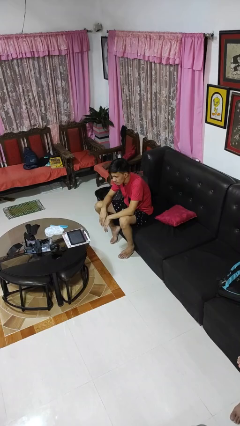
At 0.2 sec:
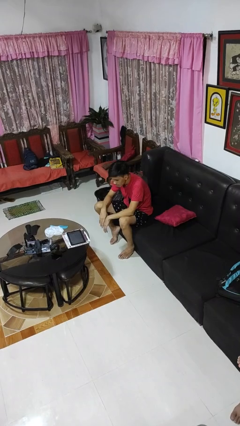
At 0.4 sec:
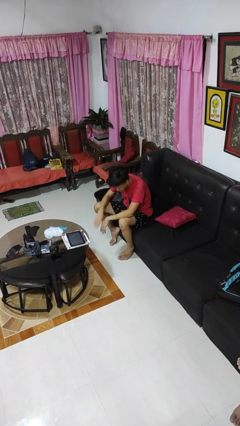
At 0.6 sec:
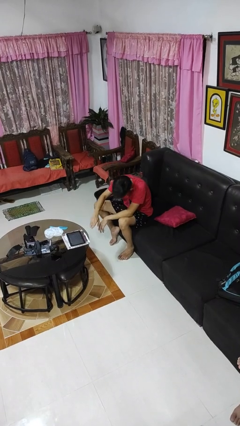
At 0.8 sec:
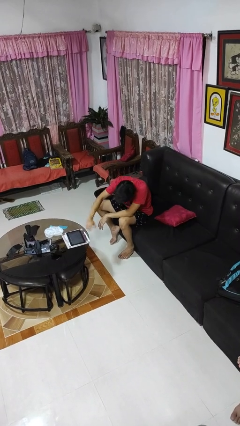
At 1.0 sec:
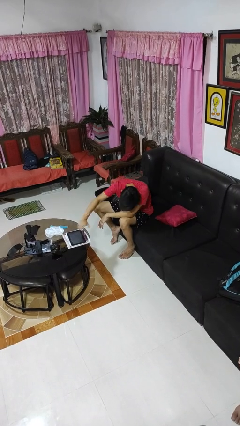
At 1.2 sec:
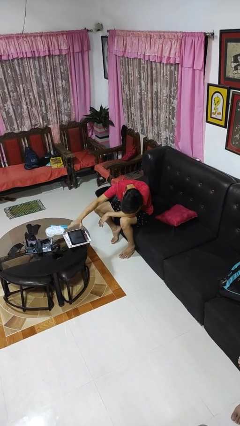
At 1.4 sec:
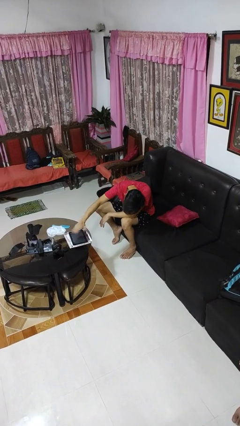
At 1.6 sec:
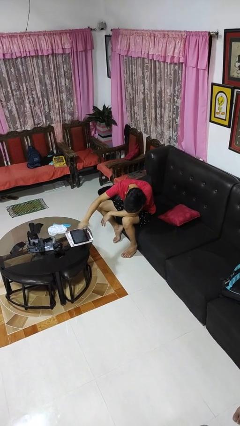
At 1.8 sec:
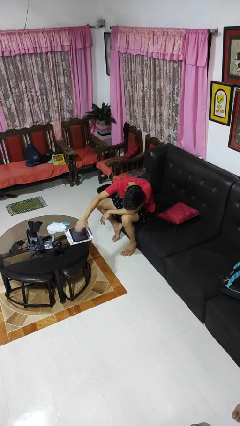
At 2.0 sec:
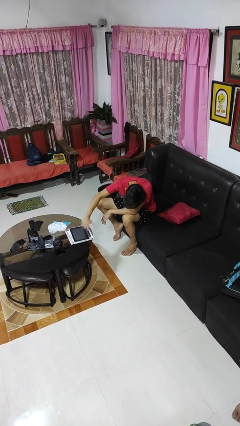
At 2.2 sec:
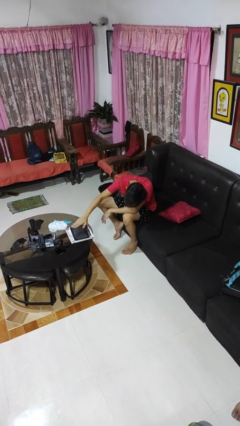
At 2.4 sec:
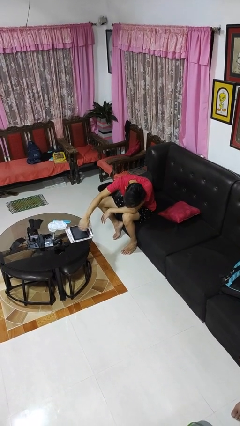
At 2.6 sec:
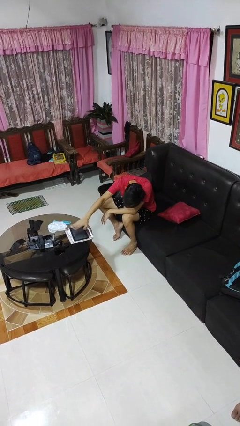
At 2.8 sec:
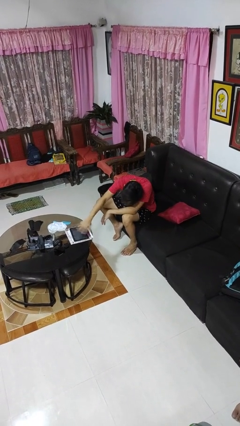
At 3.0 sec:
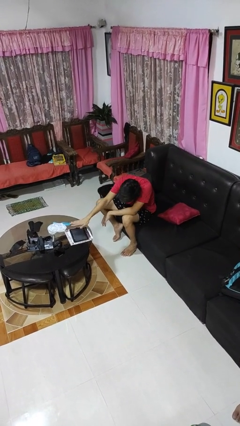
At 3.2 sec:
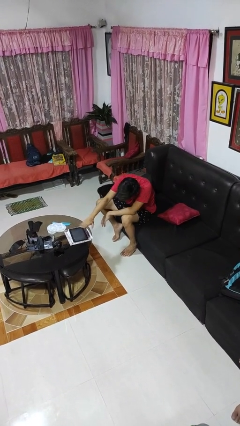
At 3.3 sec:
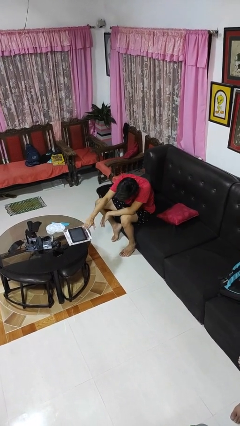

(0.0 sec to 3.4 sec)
person waves hand over object

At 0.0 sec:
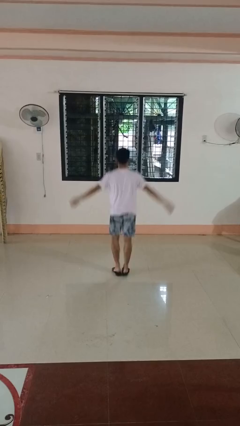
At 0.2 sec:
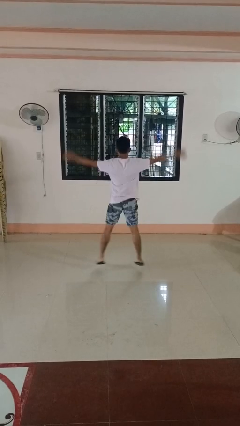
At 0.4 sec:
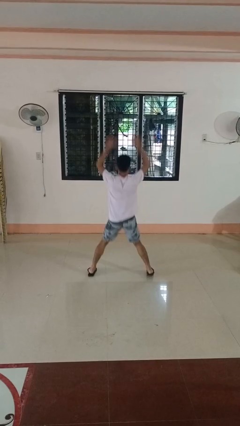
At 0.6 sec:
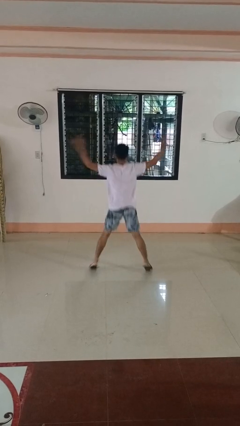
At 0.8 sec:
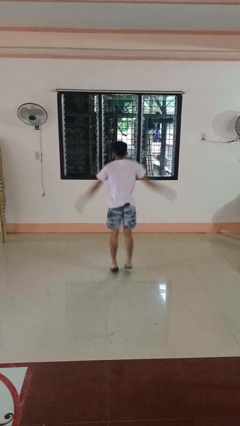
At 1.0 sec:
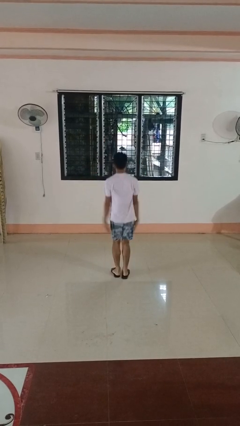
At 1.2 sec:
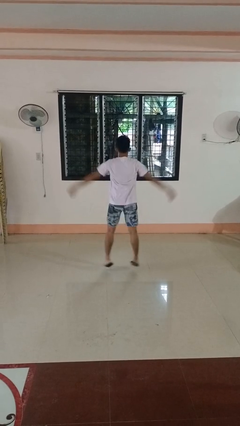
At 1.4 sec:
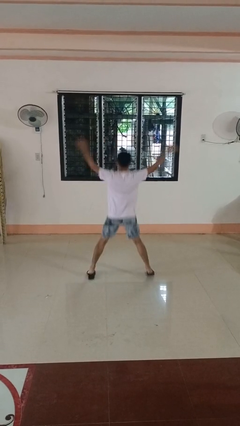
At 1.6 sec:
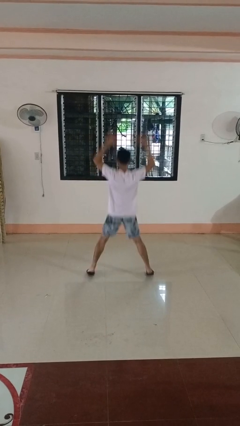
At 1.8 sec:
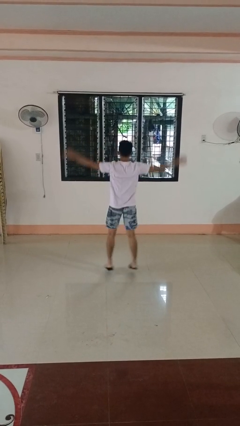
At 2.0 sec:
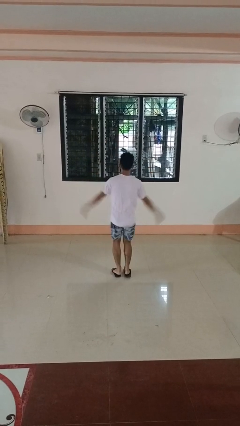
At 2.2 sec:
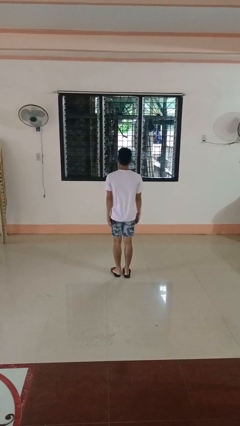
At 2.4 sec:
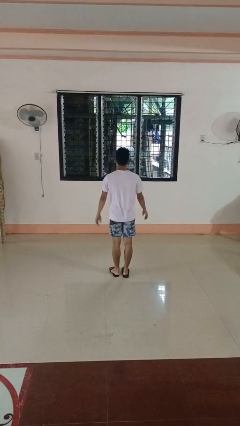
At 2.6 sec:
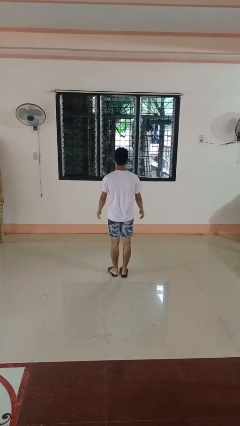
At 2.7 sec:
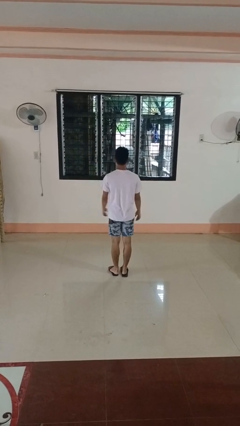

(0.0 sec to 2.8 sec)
person exercises with jumping jacks

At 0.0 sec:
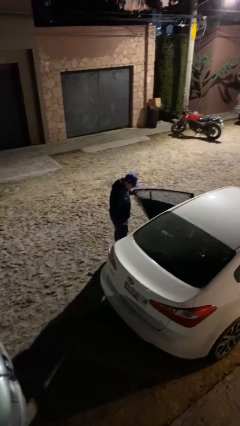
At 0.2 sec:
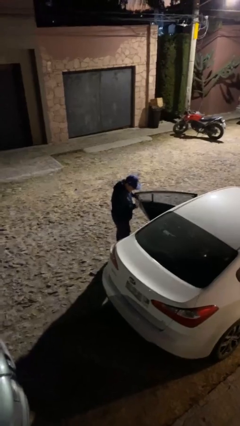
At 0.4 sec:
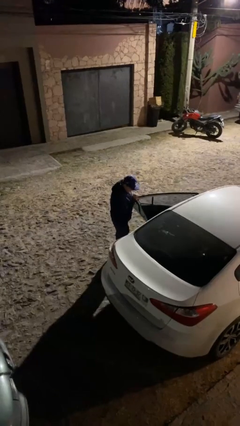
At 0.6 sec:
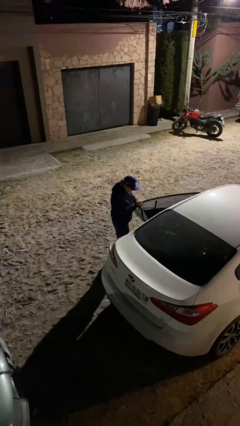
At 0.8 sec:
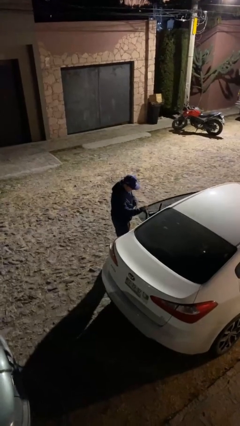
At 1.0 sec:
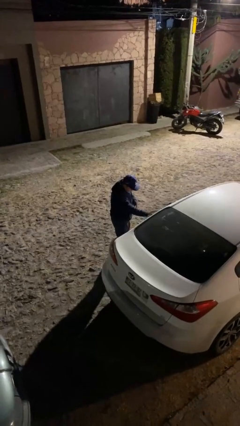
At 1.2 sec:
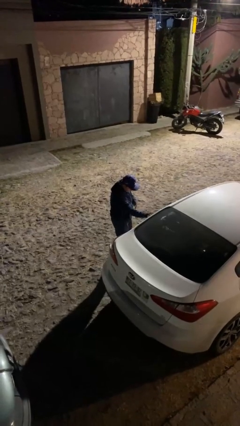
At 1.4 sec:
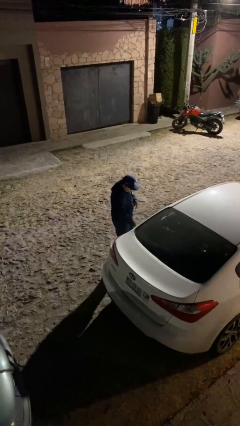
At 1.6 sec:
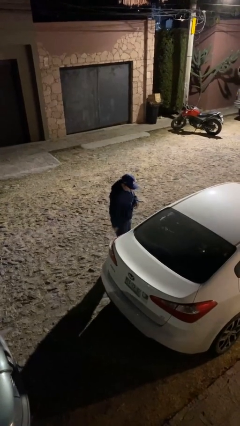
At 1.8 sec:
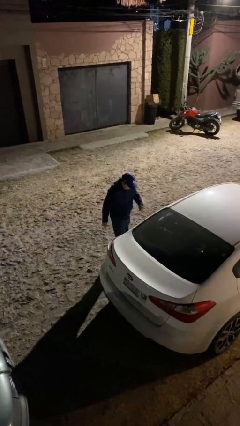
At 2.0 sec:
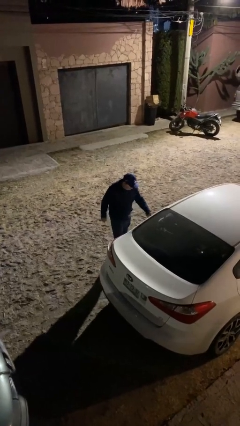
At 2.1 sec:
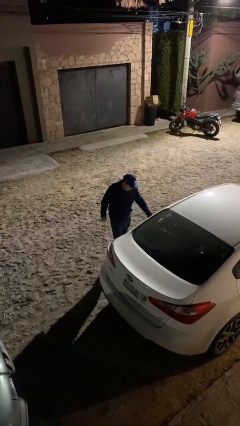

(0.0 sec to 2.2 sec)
person closes car door

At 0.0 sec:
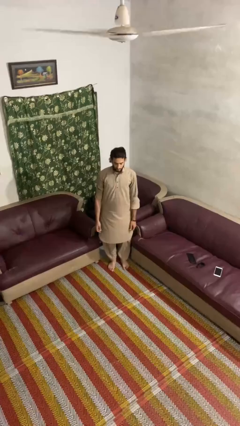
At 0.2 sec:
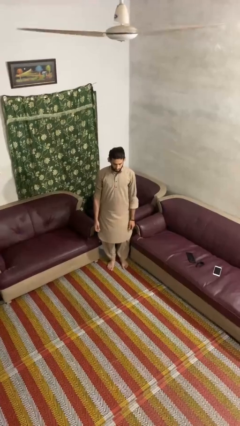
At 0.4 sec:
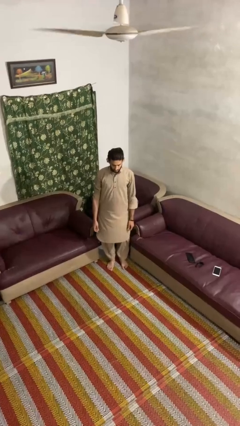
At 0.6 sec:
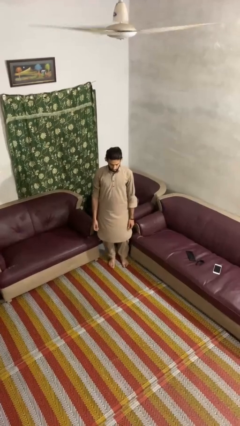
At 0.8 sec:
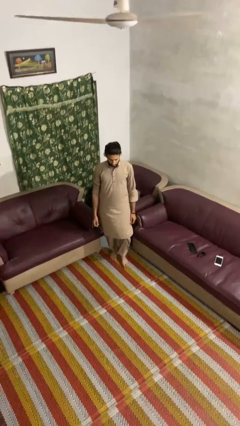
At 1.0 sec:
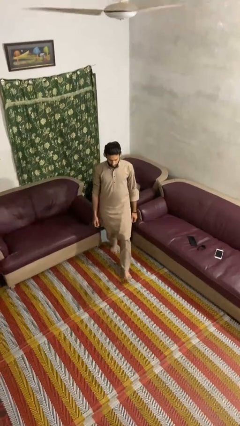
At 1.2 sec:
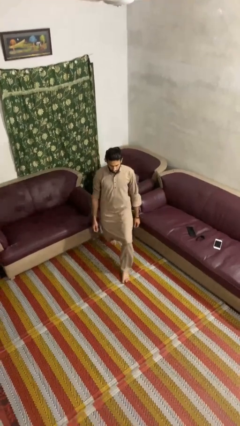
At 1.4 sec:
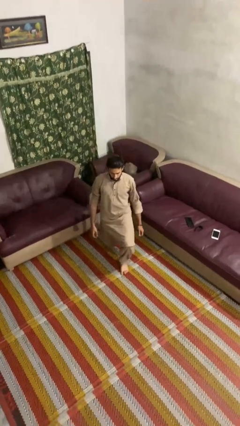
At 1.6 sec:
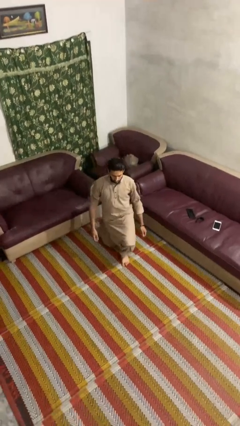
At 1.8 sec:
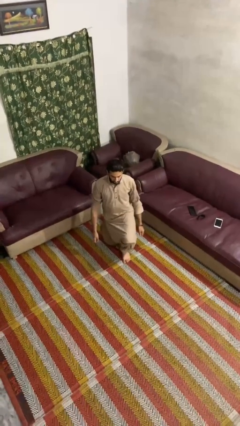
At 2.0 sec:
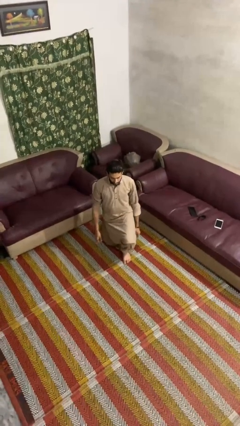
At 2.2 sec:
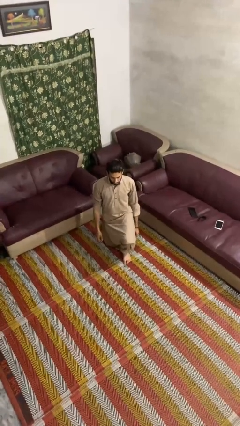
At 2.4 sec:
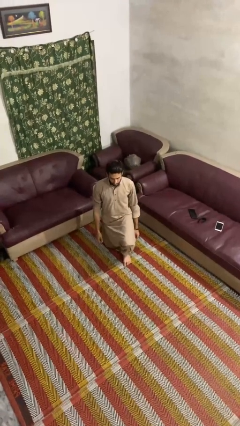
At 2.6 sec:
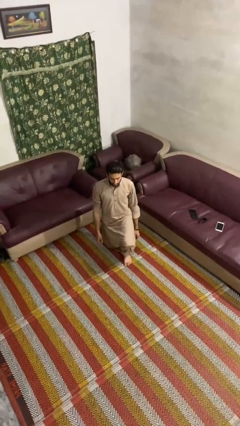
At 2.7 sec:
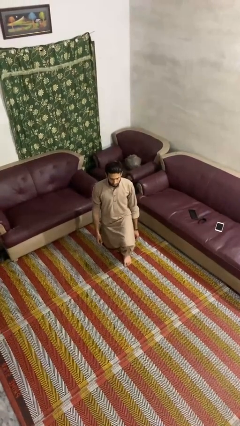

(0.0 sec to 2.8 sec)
person kneels

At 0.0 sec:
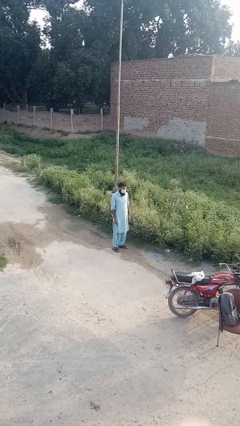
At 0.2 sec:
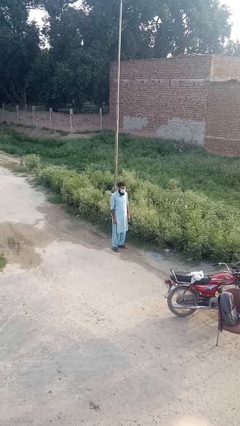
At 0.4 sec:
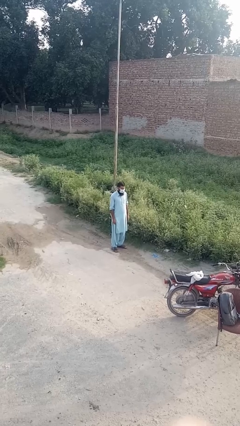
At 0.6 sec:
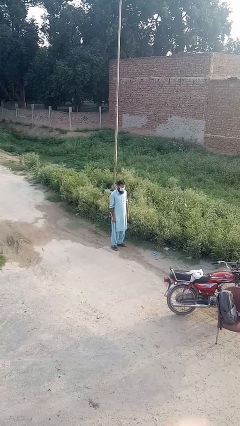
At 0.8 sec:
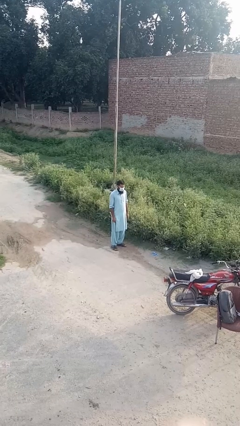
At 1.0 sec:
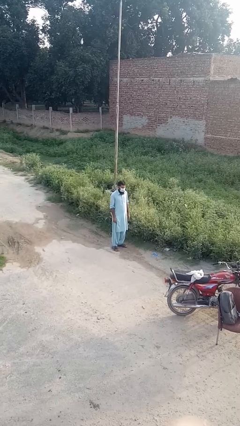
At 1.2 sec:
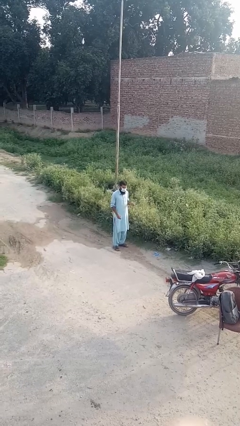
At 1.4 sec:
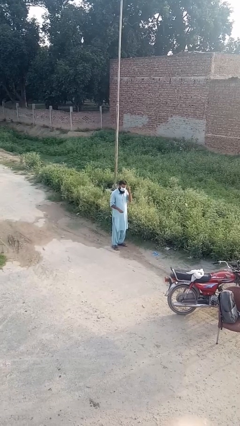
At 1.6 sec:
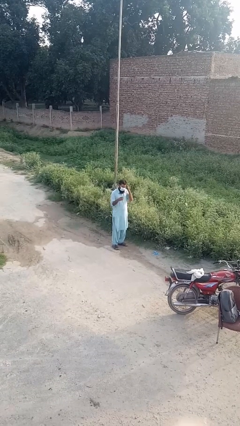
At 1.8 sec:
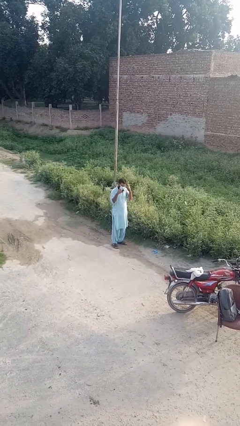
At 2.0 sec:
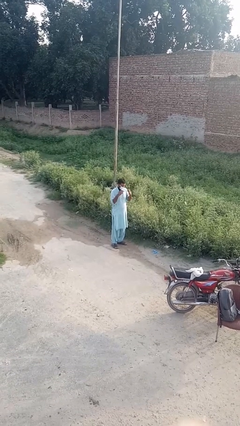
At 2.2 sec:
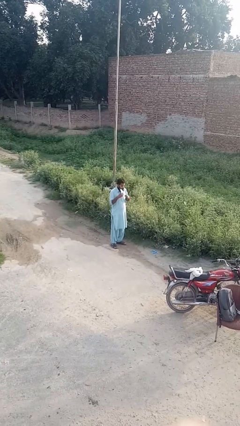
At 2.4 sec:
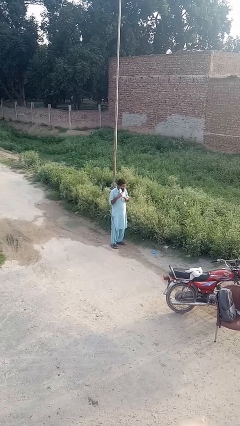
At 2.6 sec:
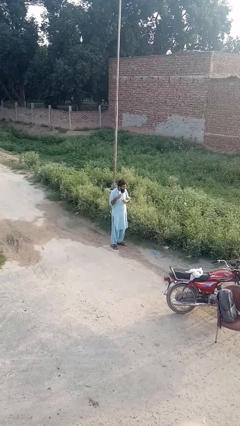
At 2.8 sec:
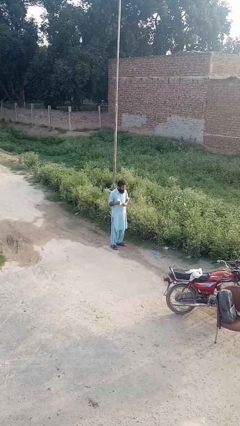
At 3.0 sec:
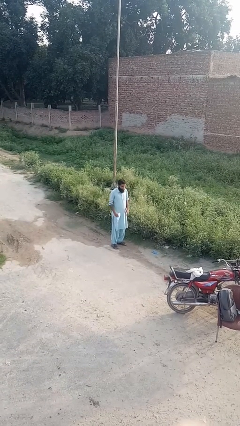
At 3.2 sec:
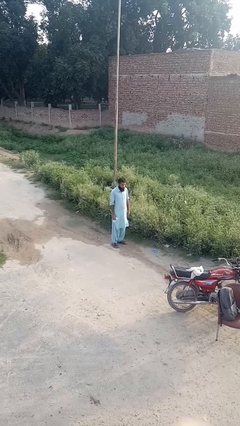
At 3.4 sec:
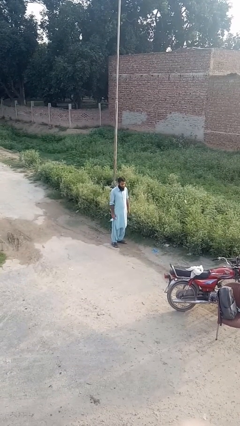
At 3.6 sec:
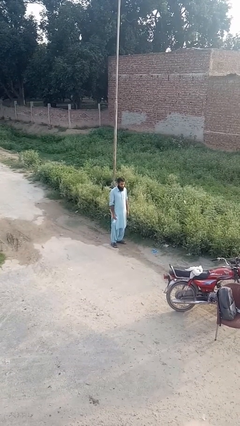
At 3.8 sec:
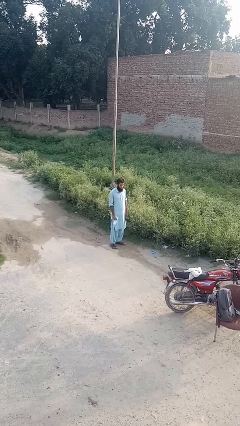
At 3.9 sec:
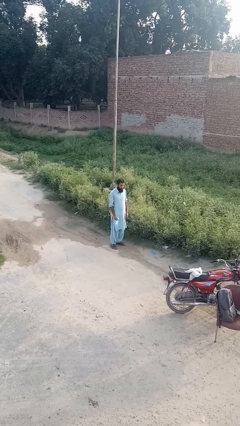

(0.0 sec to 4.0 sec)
person takes off facemask

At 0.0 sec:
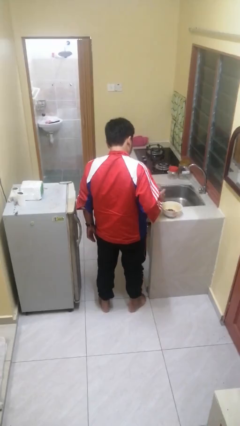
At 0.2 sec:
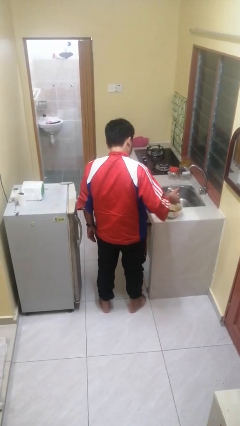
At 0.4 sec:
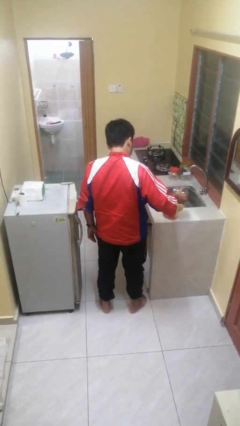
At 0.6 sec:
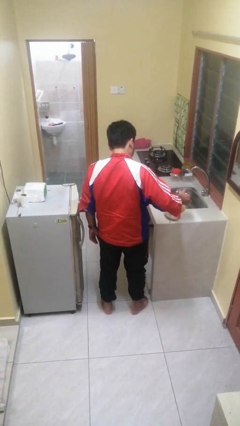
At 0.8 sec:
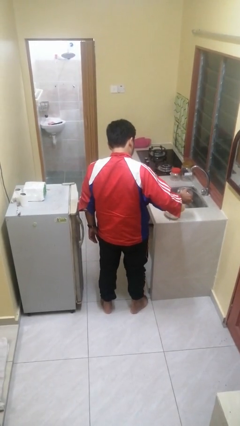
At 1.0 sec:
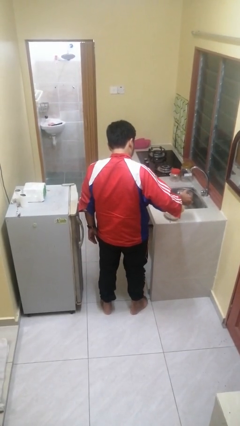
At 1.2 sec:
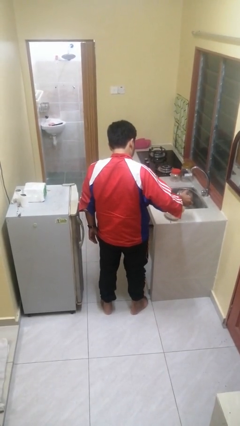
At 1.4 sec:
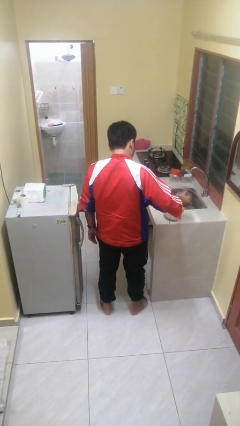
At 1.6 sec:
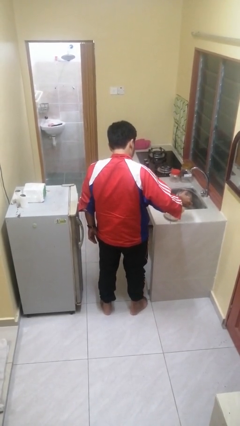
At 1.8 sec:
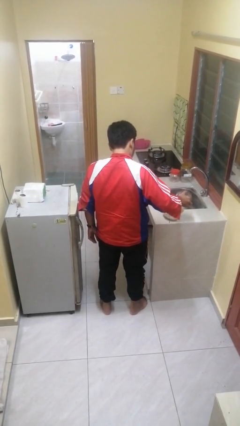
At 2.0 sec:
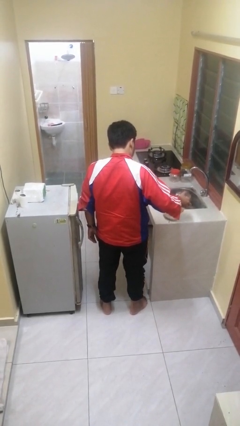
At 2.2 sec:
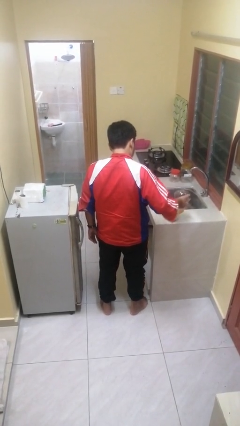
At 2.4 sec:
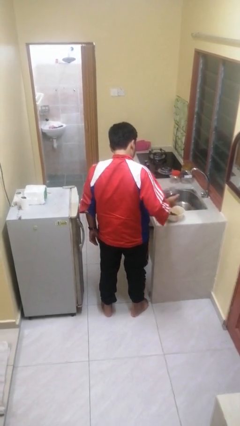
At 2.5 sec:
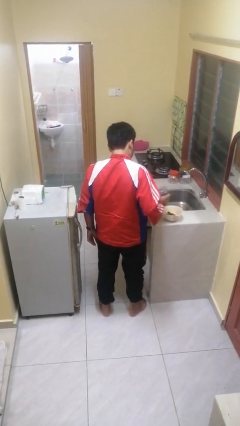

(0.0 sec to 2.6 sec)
person pours into bowl
